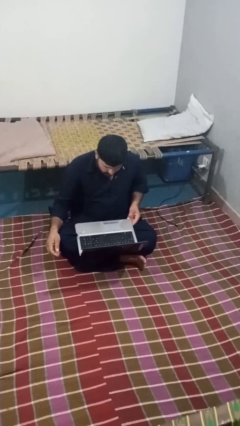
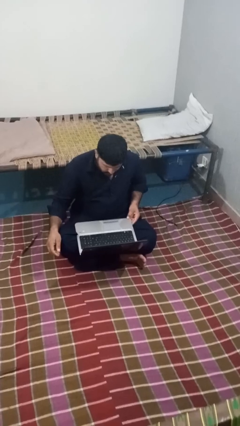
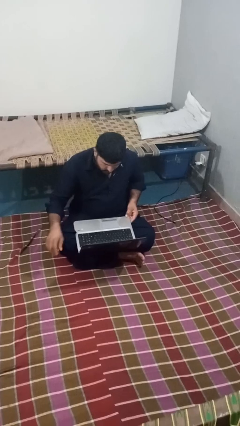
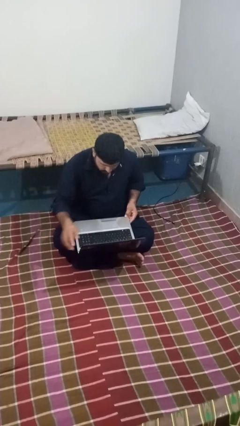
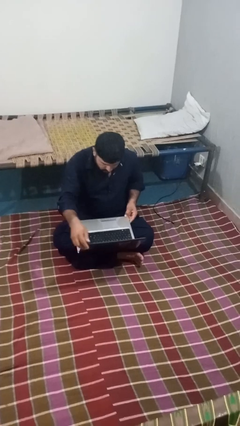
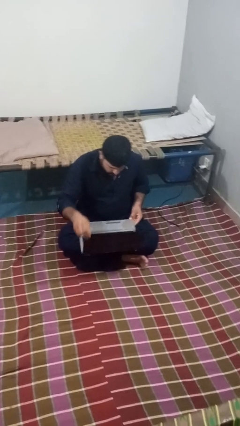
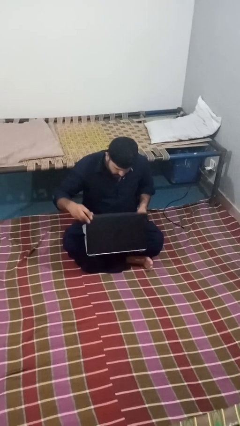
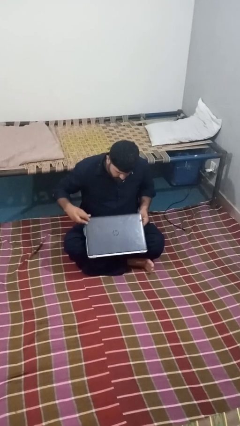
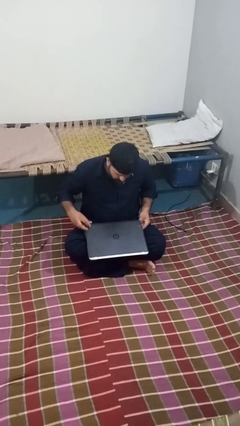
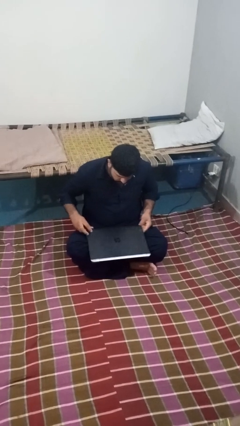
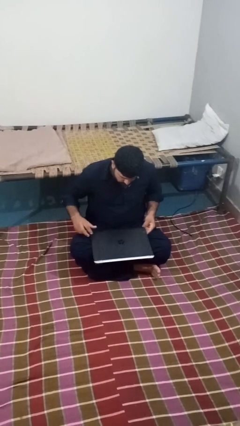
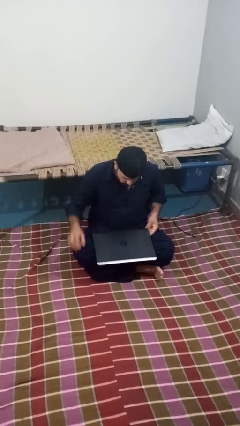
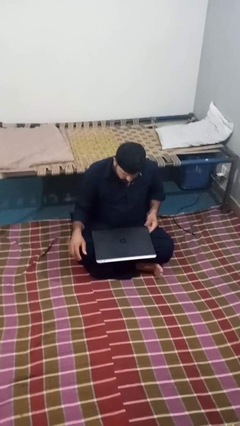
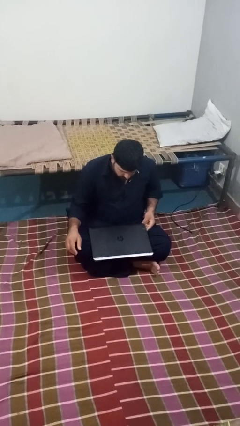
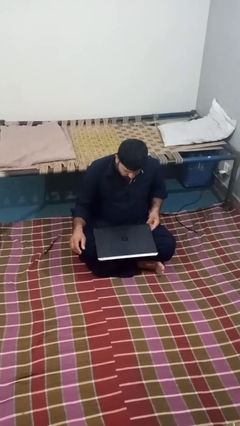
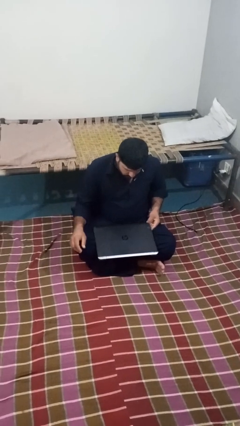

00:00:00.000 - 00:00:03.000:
person closes laptop

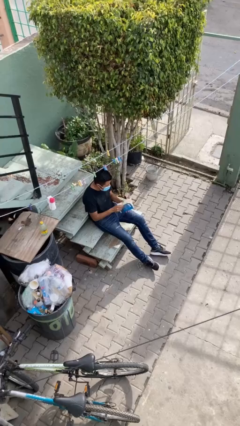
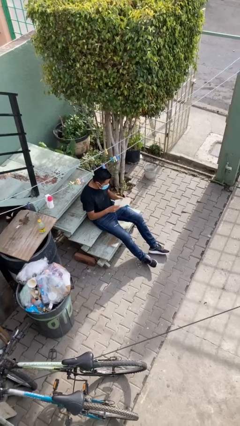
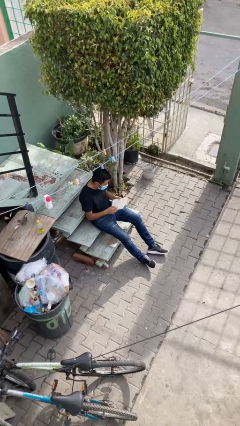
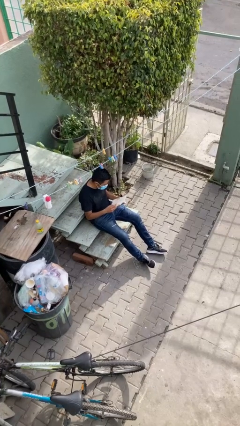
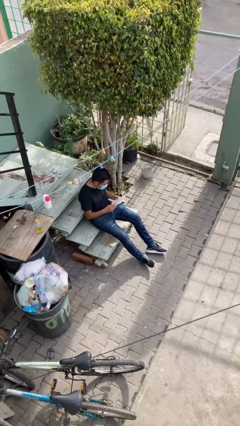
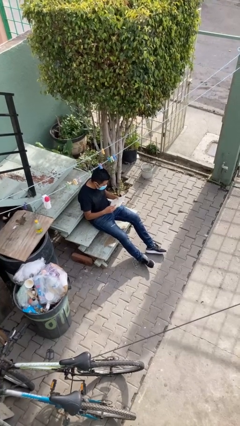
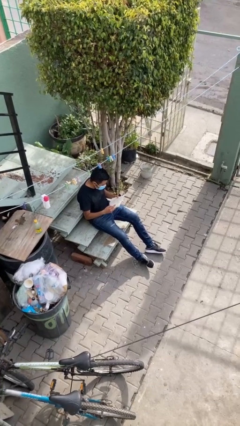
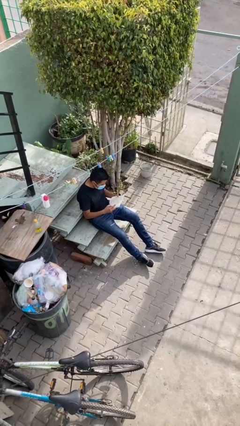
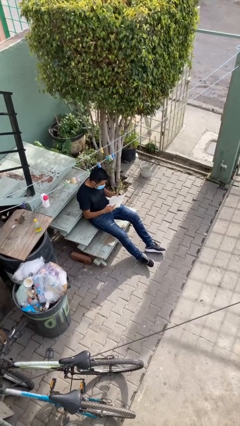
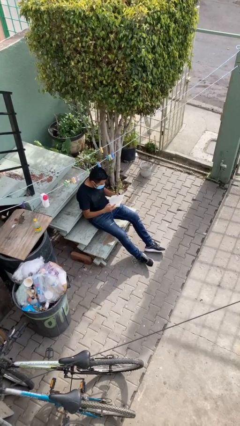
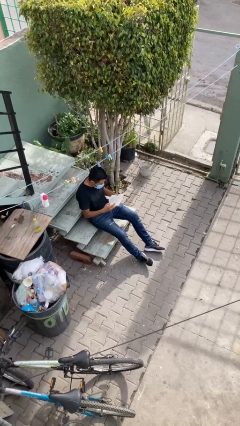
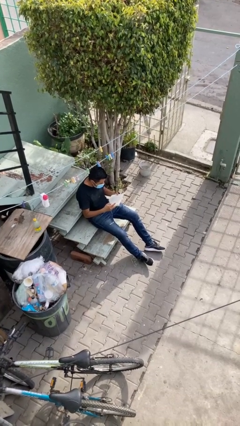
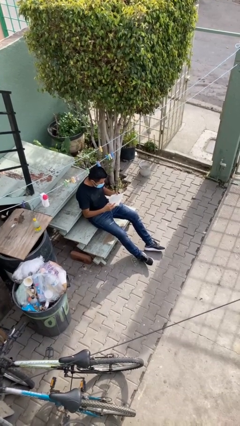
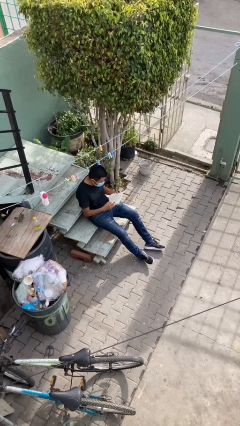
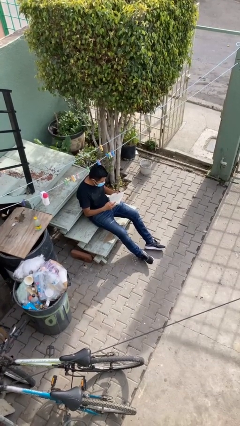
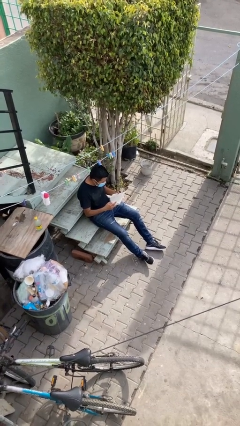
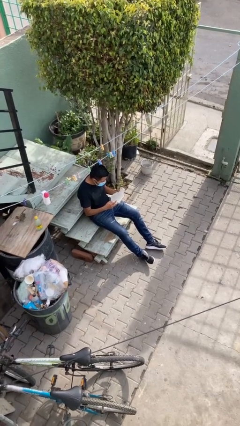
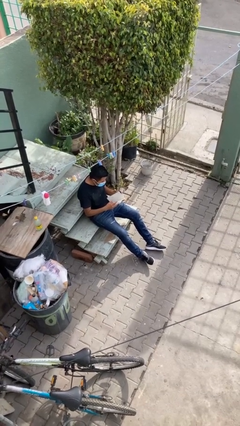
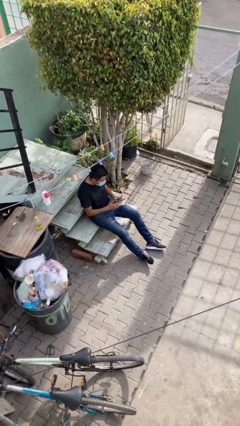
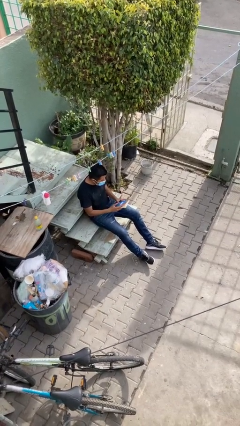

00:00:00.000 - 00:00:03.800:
person reads document

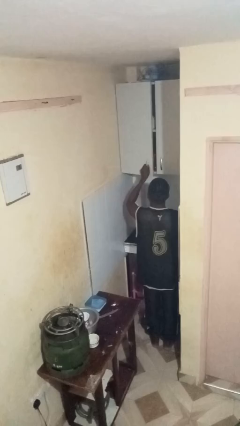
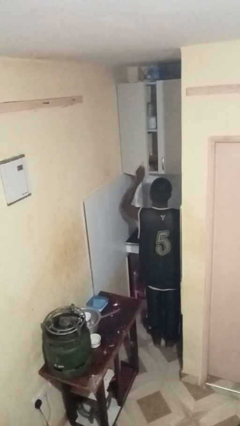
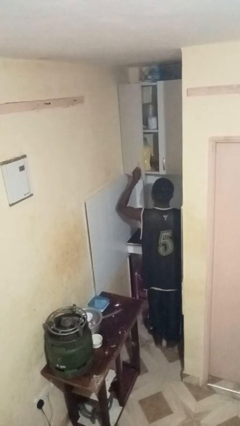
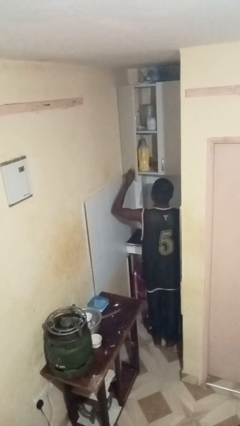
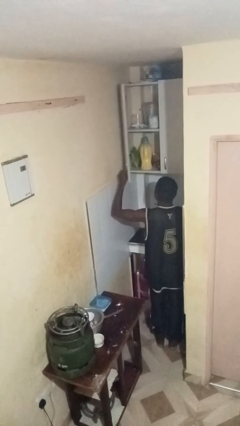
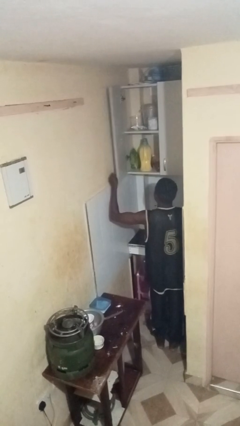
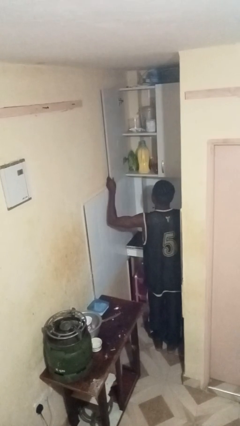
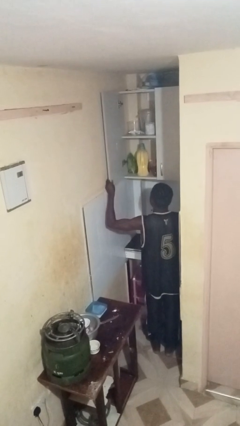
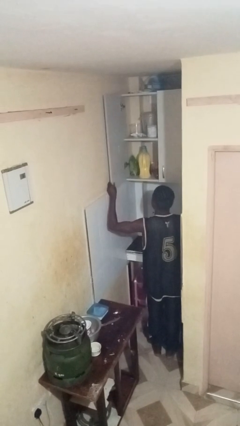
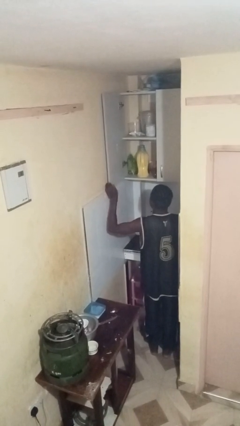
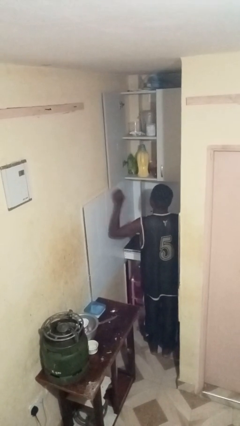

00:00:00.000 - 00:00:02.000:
person opens cabinet

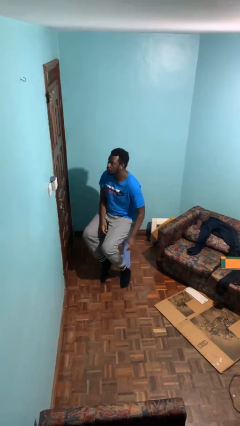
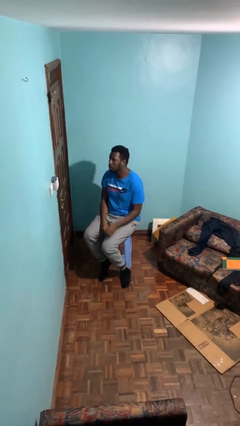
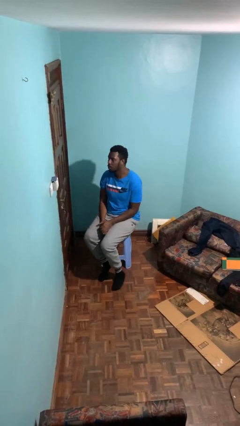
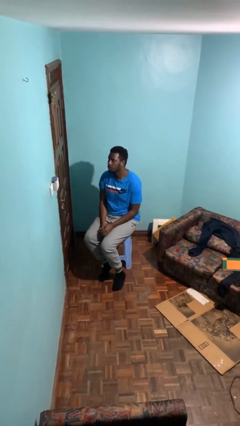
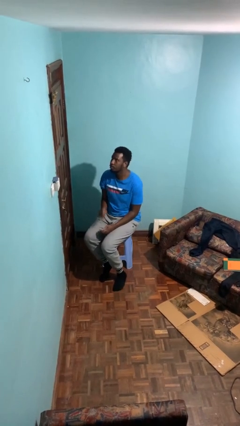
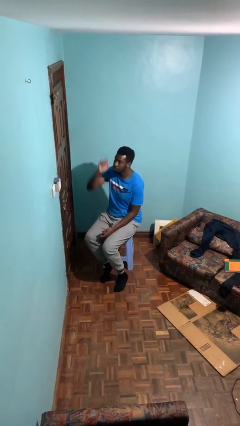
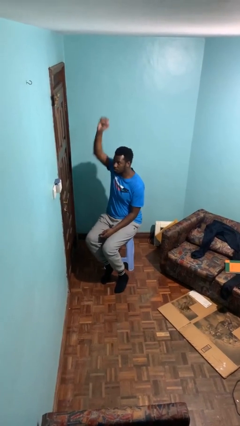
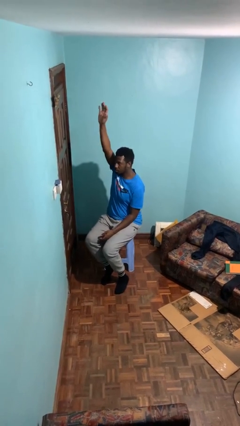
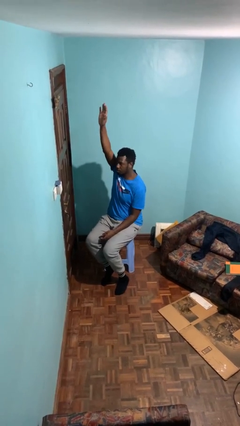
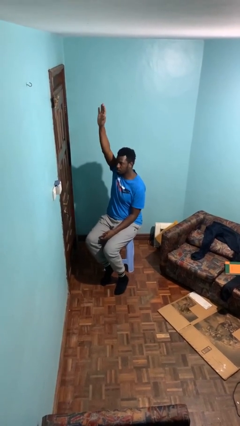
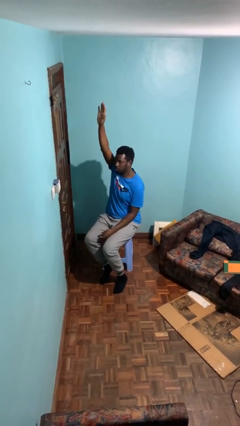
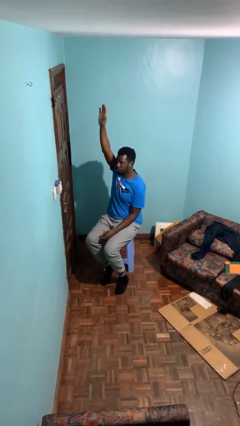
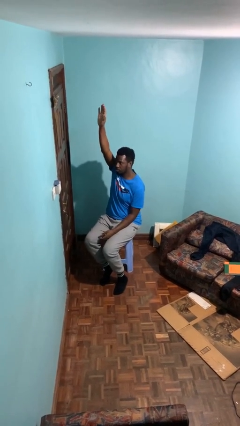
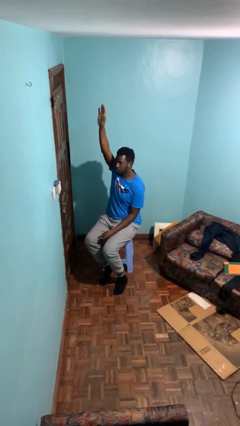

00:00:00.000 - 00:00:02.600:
person gestures raise hand

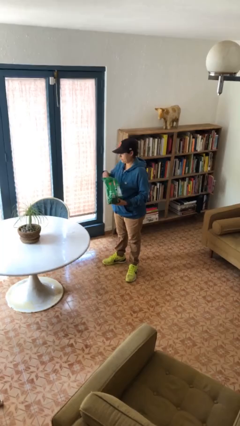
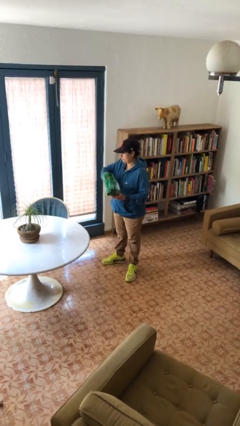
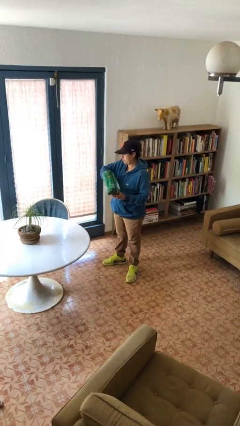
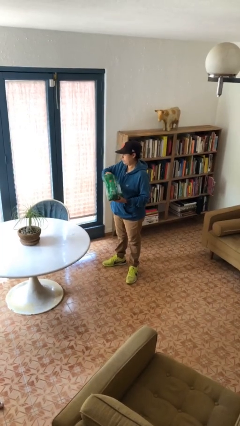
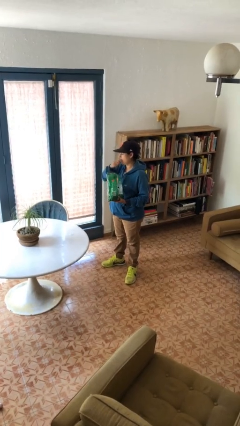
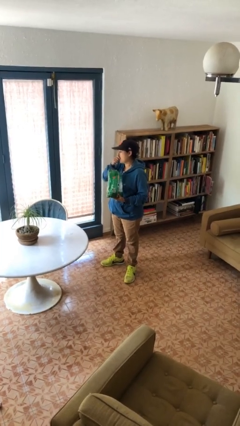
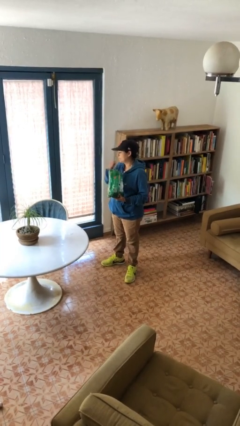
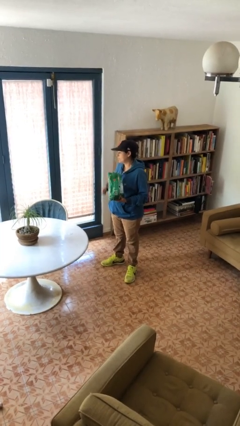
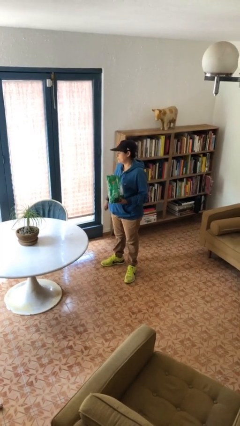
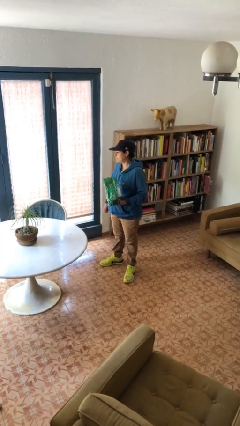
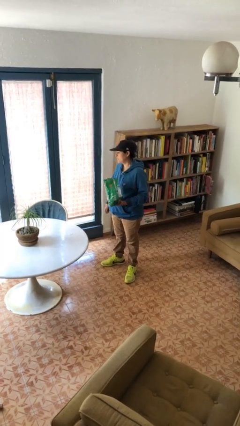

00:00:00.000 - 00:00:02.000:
person eats snack from bag

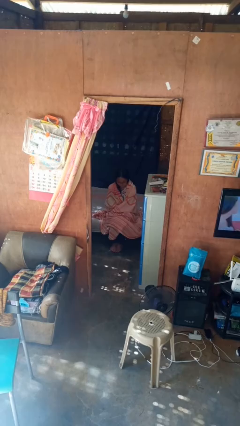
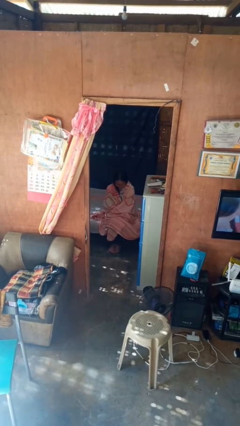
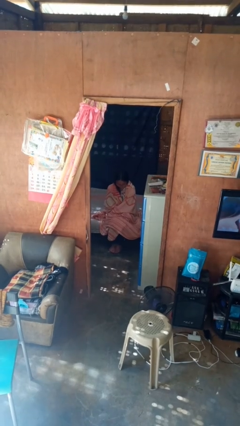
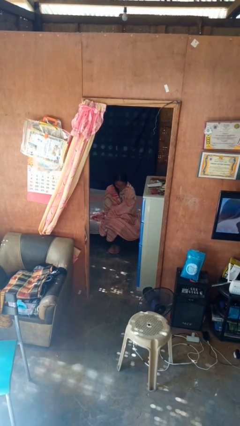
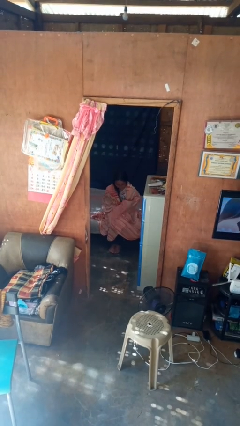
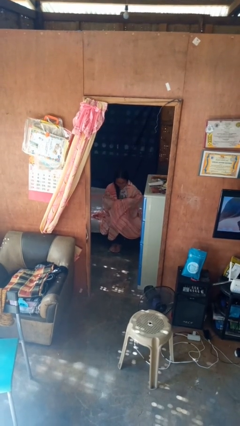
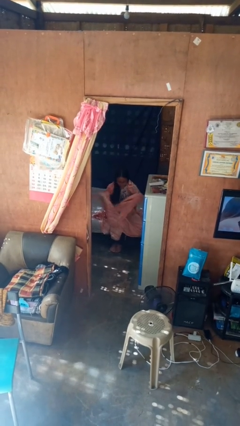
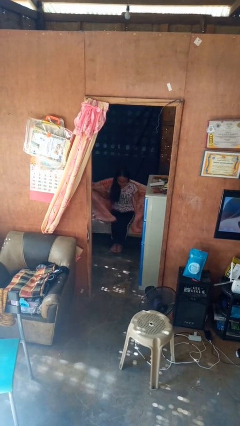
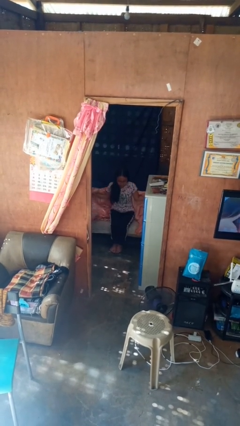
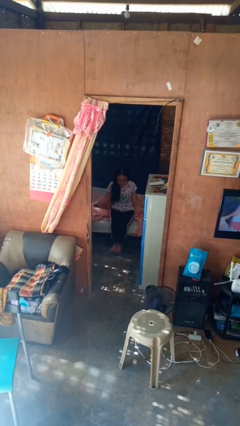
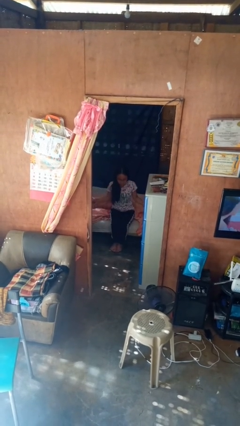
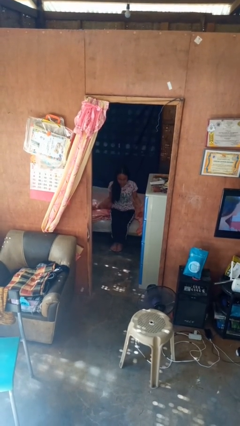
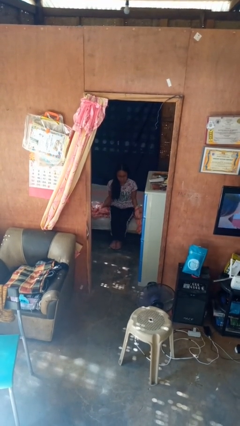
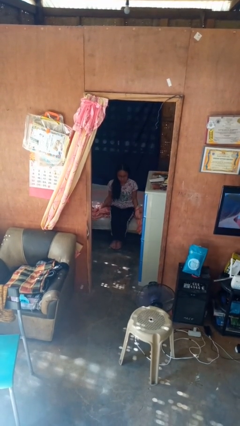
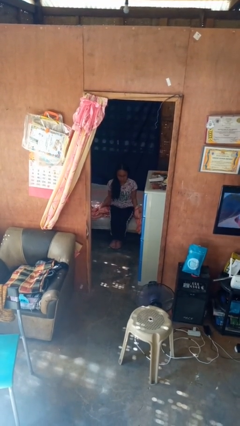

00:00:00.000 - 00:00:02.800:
person uncovers with blanket

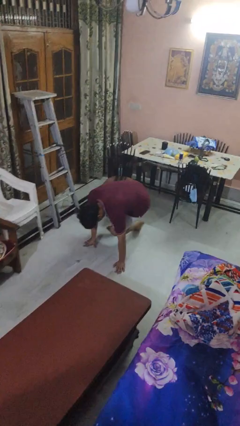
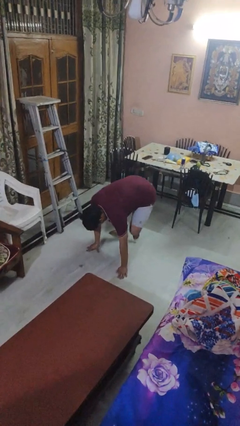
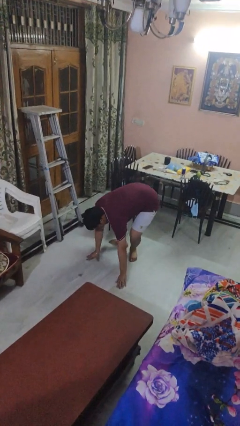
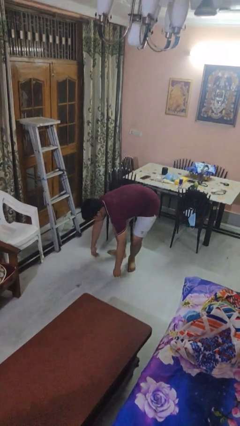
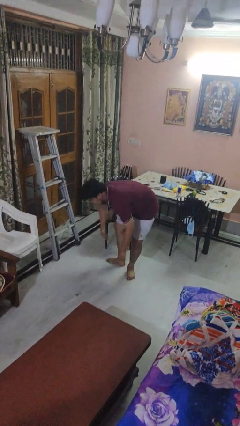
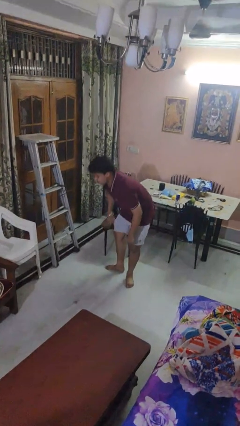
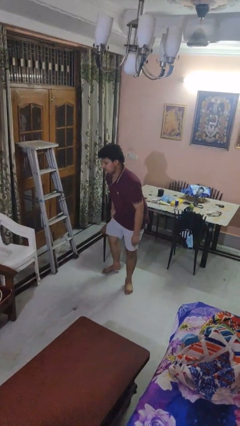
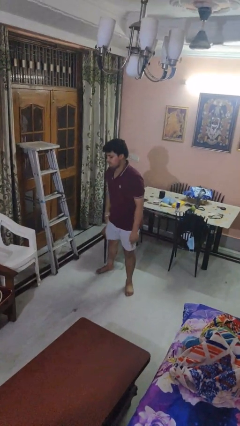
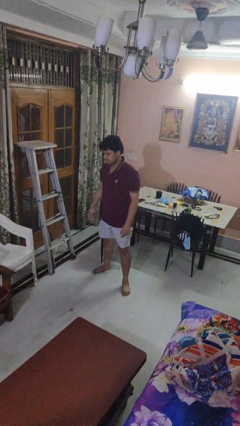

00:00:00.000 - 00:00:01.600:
person stands up from floor
